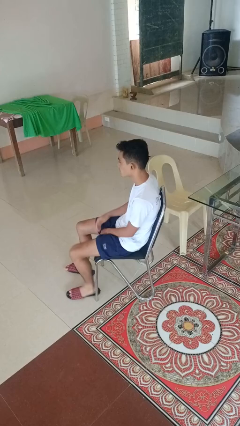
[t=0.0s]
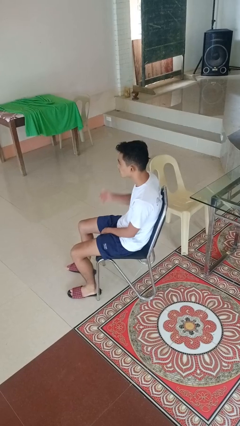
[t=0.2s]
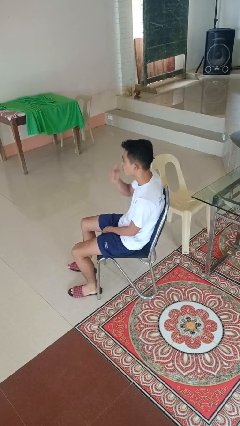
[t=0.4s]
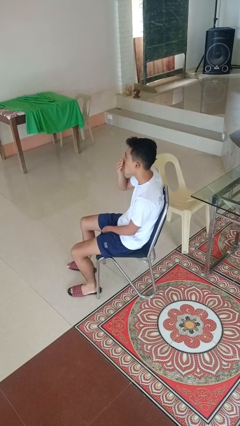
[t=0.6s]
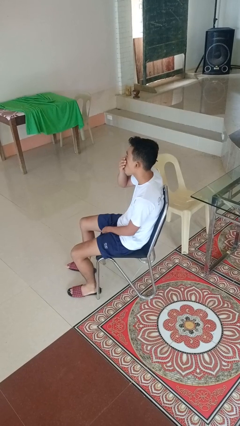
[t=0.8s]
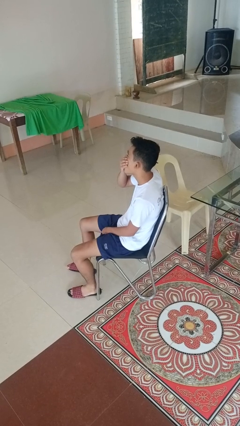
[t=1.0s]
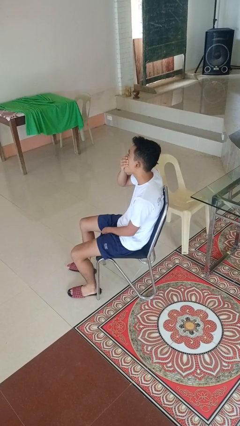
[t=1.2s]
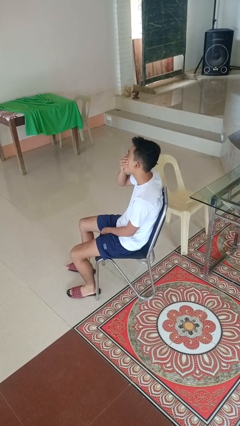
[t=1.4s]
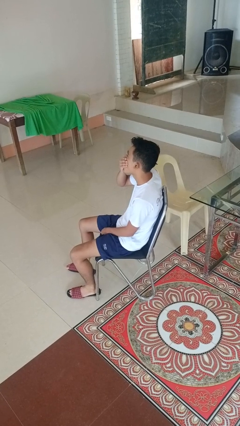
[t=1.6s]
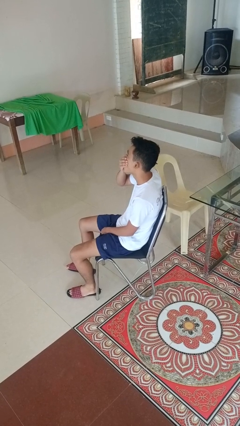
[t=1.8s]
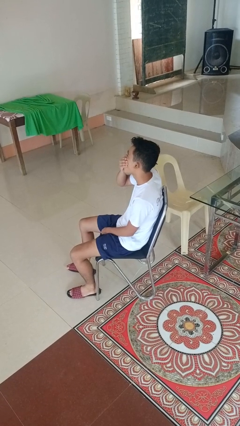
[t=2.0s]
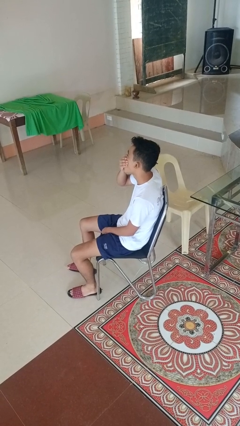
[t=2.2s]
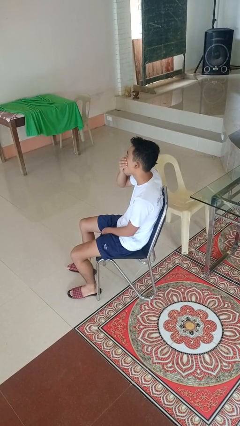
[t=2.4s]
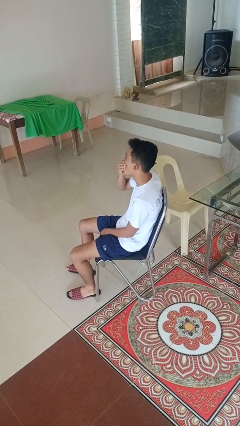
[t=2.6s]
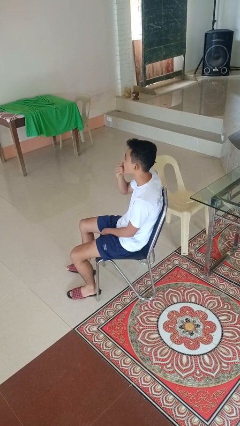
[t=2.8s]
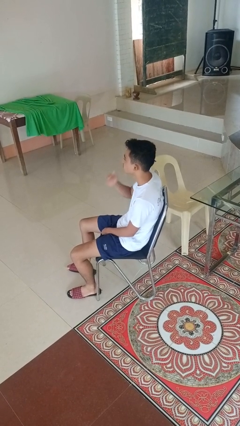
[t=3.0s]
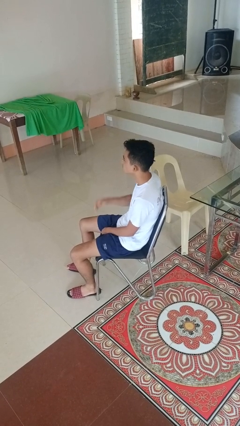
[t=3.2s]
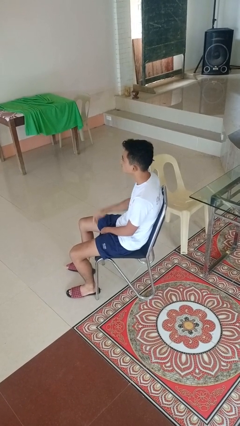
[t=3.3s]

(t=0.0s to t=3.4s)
person yawns

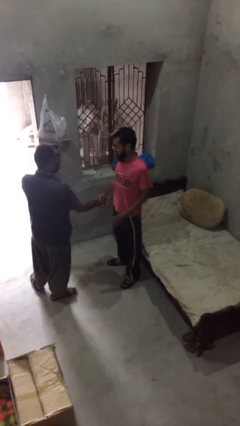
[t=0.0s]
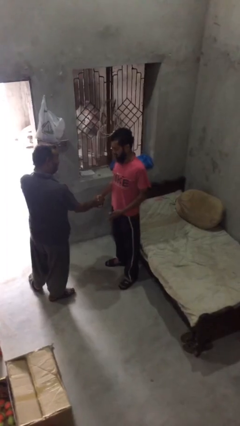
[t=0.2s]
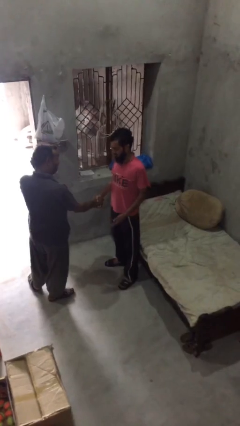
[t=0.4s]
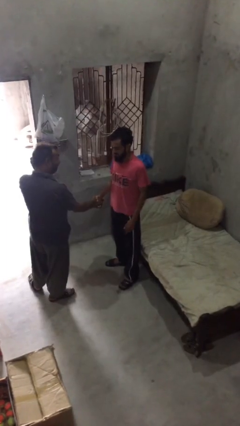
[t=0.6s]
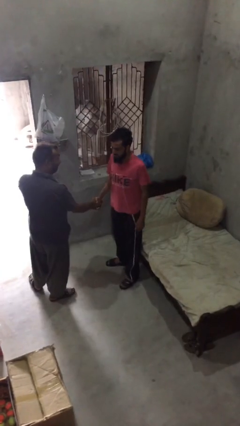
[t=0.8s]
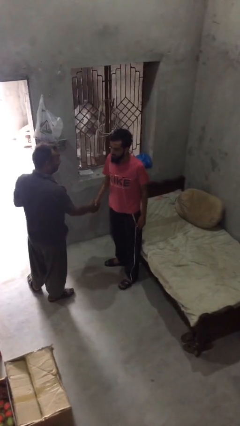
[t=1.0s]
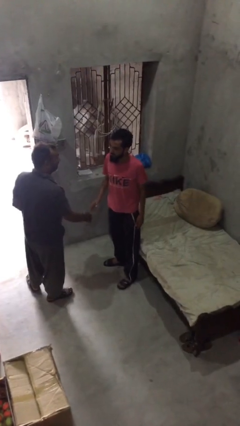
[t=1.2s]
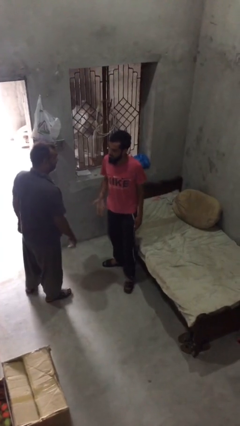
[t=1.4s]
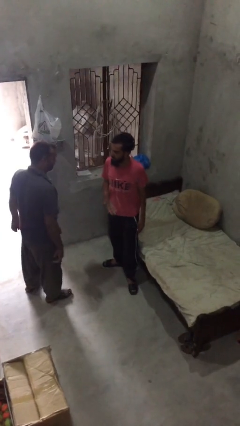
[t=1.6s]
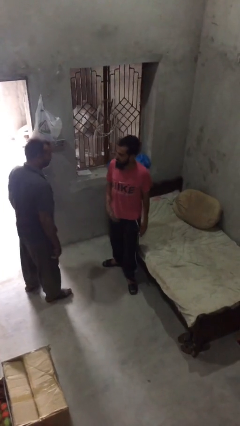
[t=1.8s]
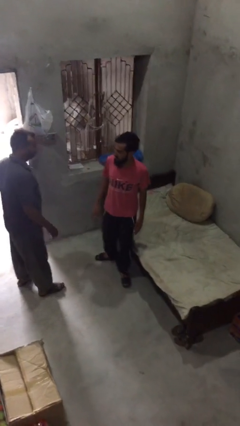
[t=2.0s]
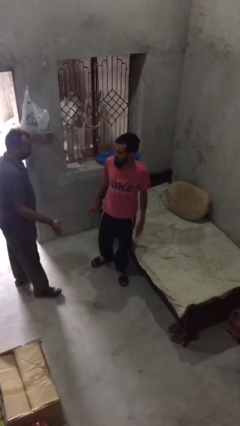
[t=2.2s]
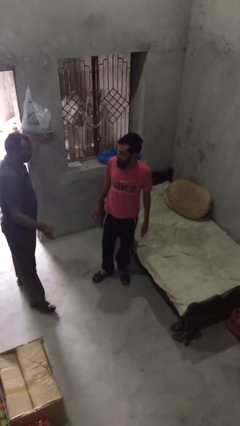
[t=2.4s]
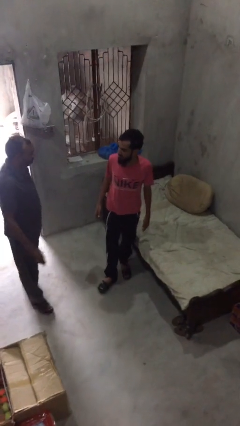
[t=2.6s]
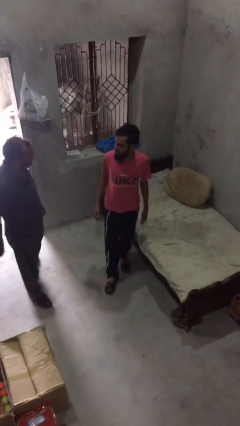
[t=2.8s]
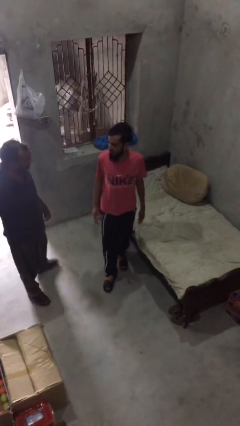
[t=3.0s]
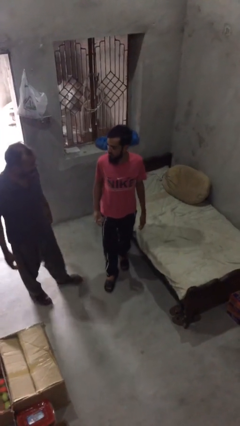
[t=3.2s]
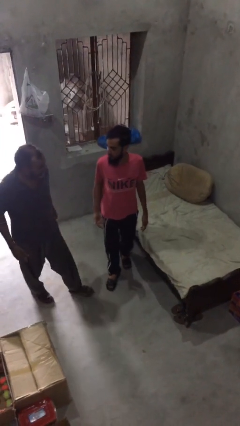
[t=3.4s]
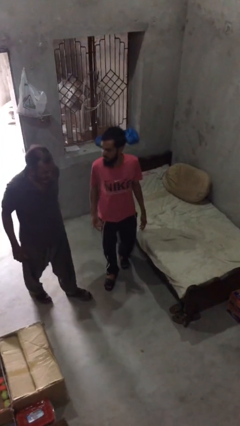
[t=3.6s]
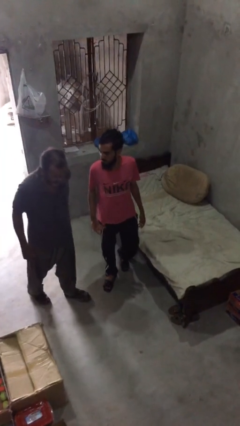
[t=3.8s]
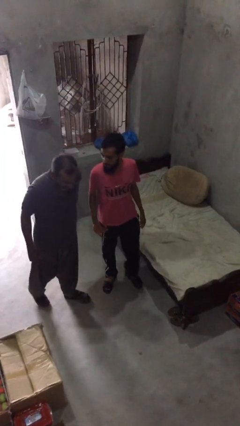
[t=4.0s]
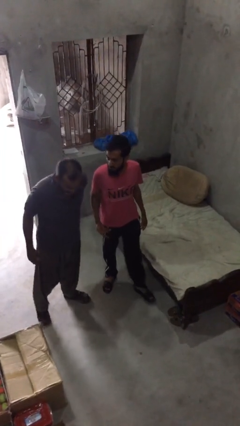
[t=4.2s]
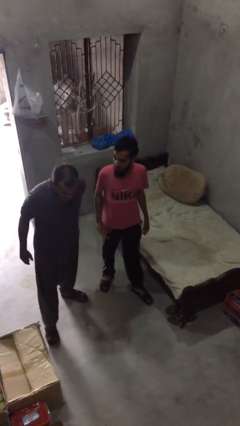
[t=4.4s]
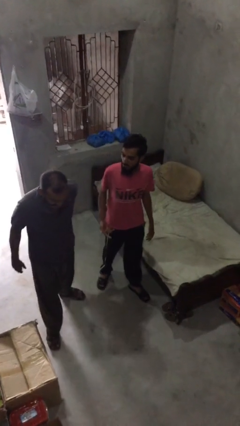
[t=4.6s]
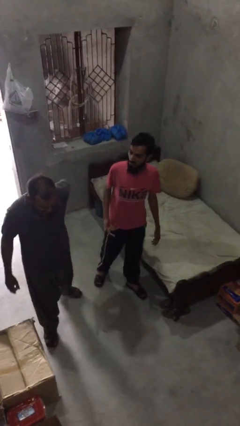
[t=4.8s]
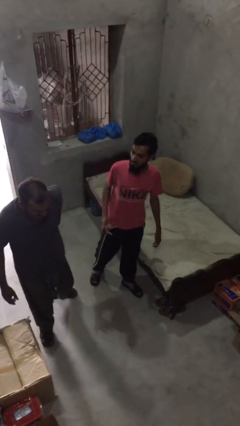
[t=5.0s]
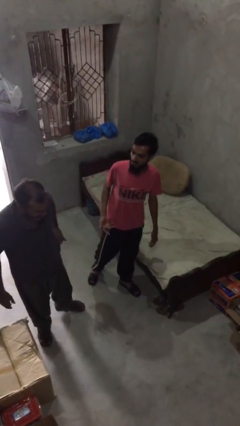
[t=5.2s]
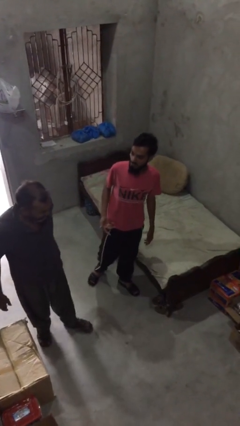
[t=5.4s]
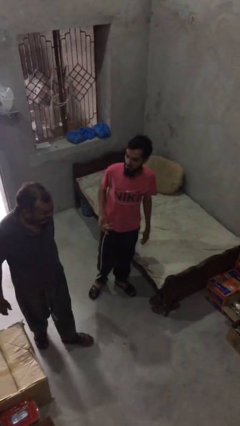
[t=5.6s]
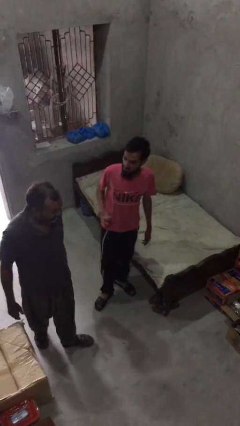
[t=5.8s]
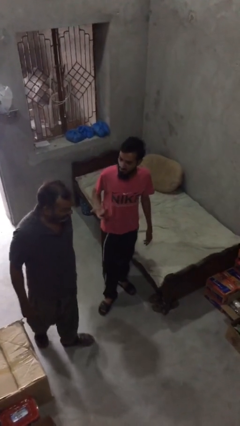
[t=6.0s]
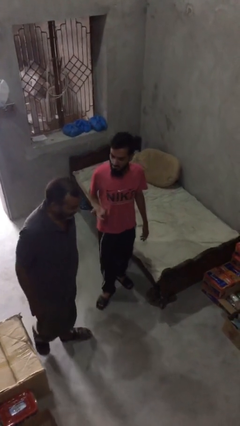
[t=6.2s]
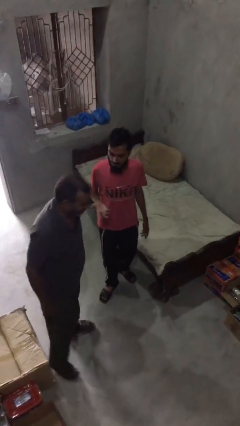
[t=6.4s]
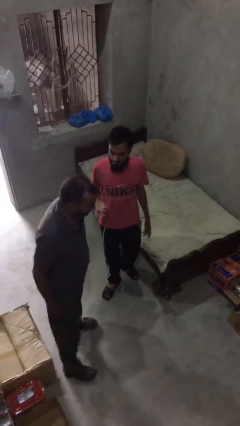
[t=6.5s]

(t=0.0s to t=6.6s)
person talks to person

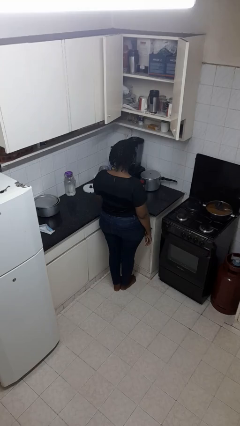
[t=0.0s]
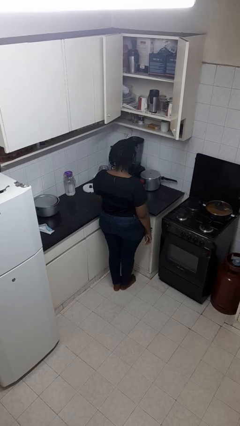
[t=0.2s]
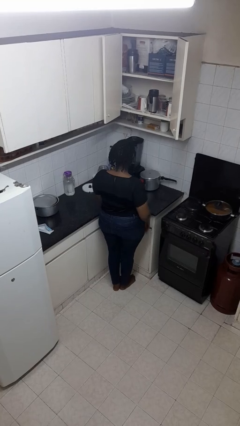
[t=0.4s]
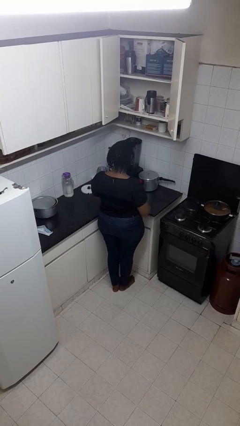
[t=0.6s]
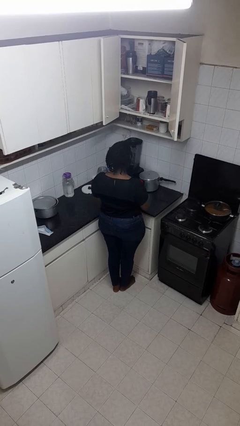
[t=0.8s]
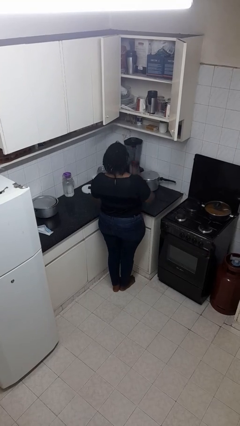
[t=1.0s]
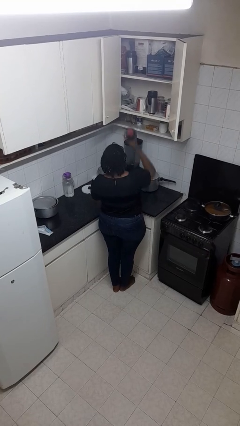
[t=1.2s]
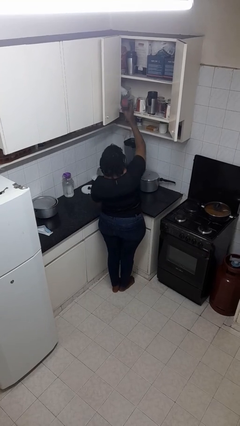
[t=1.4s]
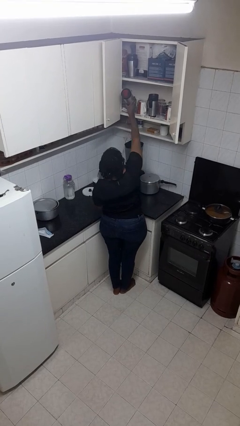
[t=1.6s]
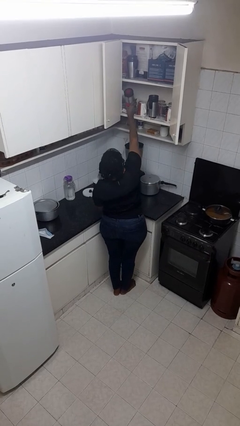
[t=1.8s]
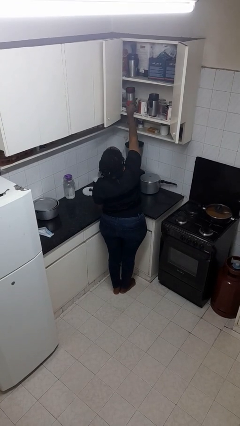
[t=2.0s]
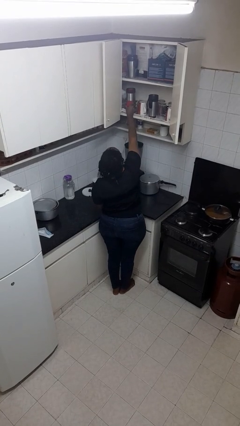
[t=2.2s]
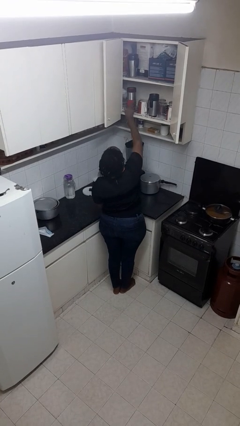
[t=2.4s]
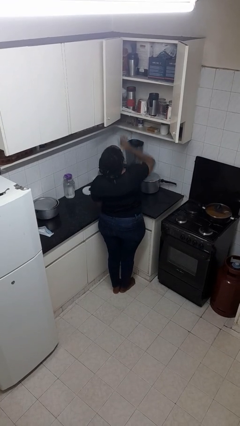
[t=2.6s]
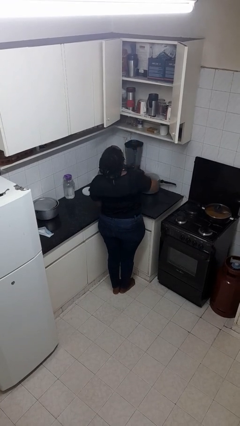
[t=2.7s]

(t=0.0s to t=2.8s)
person puts object in cabinet

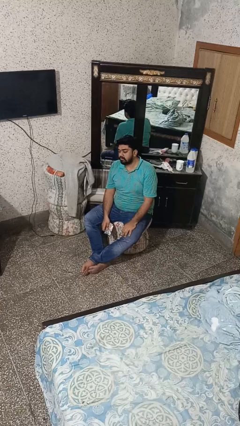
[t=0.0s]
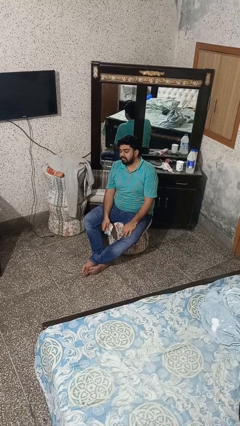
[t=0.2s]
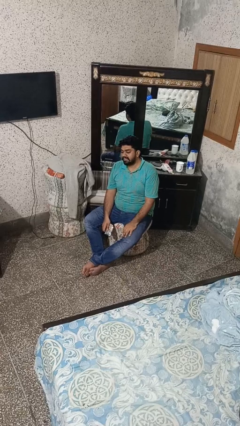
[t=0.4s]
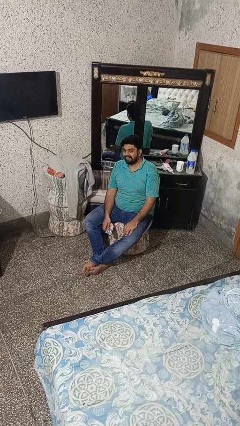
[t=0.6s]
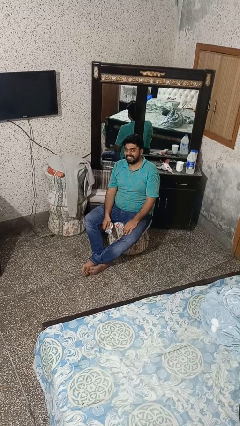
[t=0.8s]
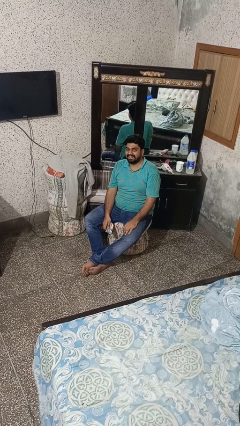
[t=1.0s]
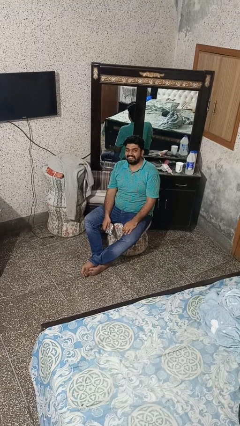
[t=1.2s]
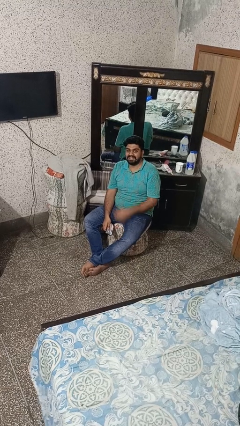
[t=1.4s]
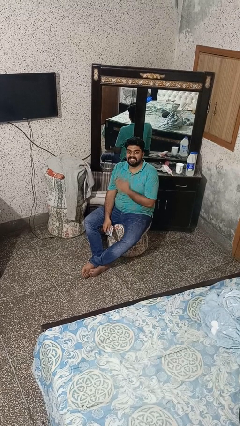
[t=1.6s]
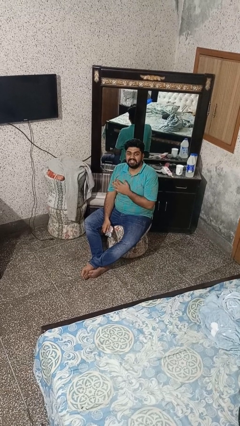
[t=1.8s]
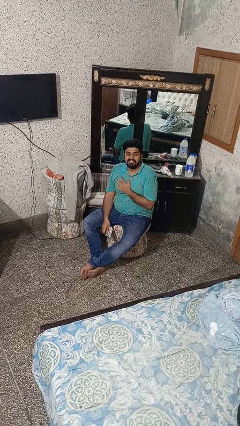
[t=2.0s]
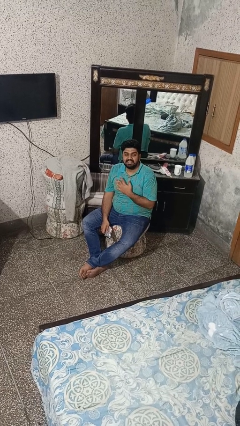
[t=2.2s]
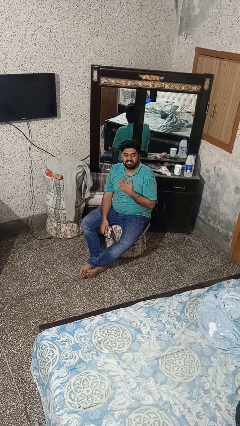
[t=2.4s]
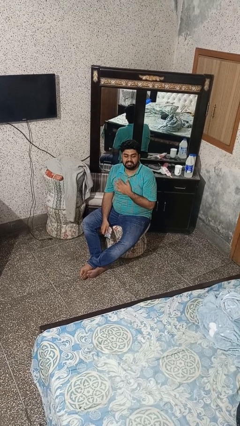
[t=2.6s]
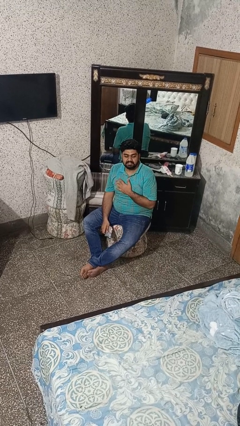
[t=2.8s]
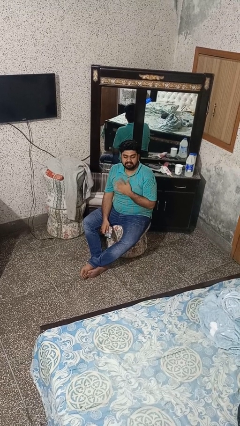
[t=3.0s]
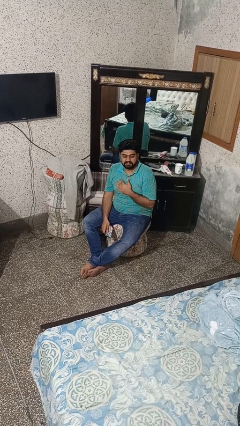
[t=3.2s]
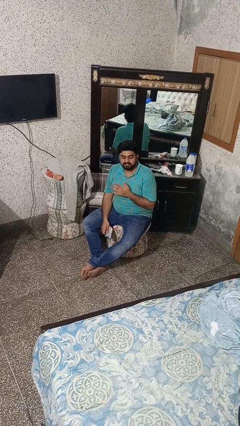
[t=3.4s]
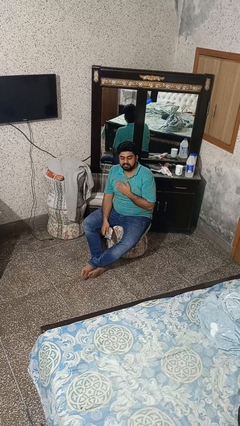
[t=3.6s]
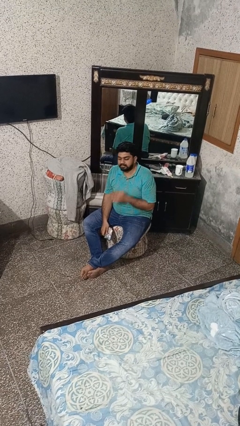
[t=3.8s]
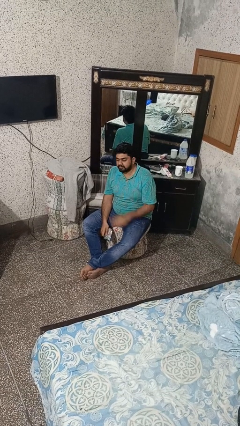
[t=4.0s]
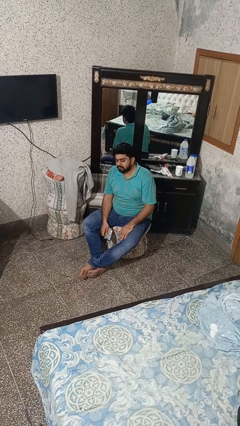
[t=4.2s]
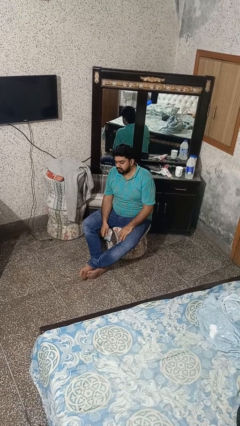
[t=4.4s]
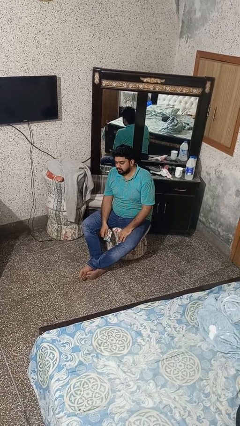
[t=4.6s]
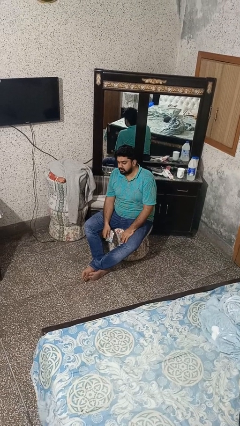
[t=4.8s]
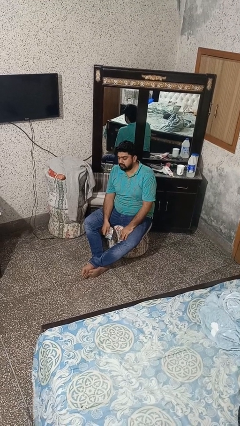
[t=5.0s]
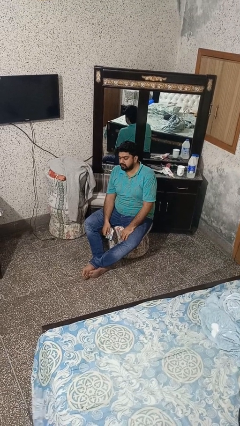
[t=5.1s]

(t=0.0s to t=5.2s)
person drums on chest
